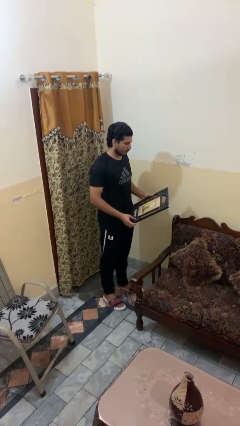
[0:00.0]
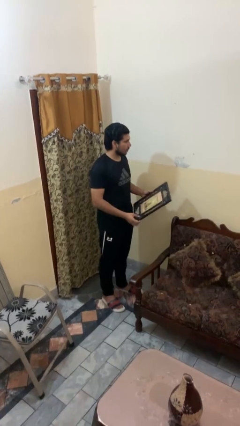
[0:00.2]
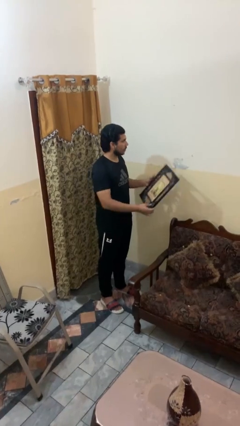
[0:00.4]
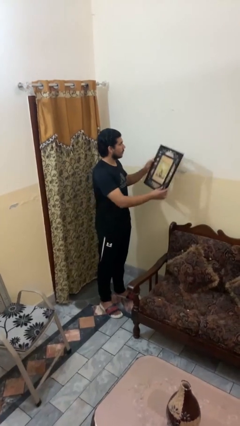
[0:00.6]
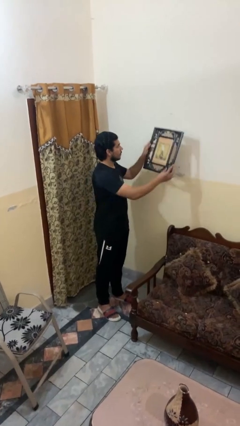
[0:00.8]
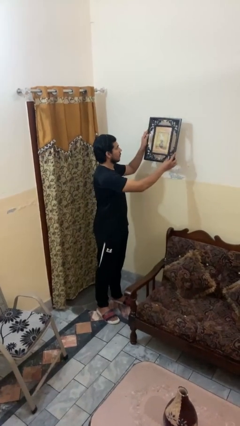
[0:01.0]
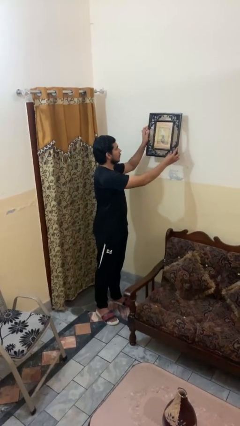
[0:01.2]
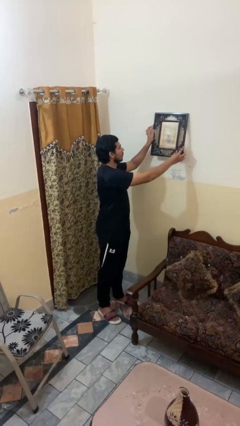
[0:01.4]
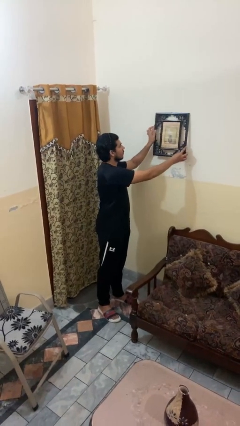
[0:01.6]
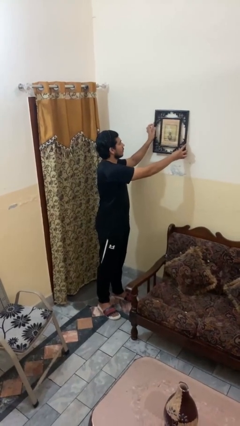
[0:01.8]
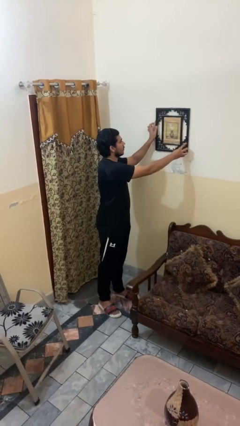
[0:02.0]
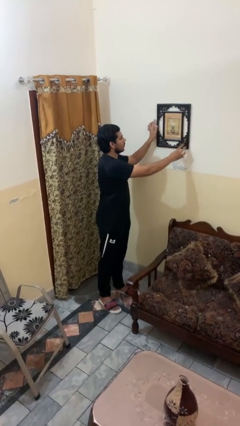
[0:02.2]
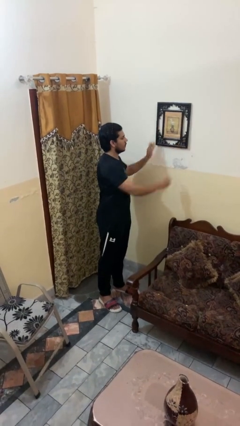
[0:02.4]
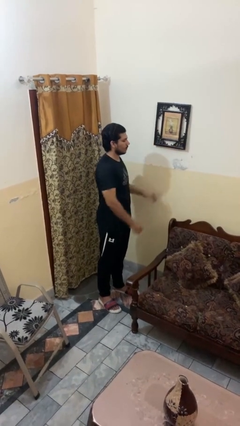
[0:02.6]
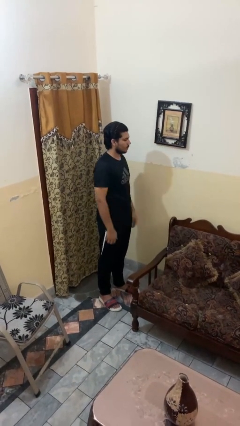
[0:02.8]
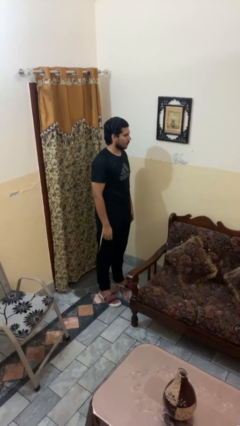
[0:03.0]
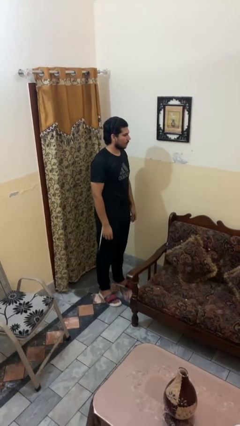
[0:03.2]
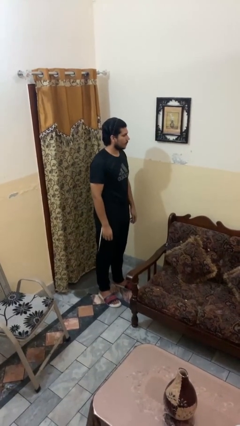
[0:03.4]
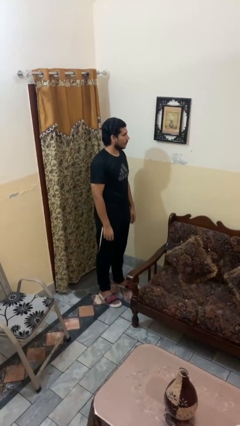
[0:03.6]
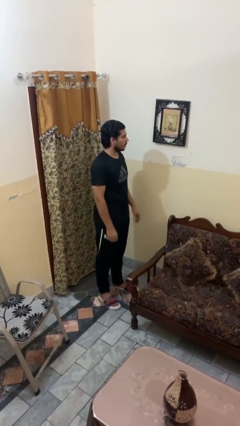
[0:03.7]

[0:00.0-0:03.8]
person puts up picture frame

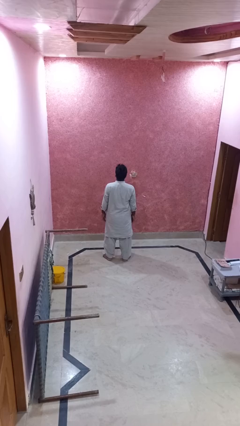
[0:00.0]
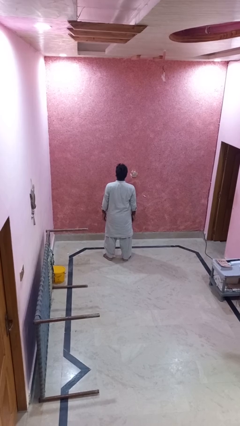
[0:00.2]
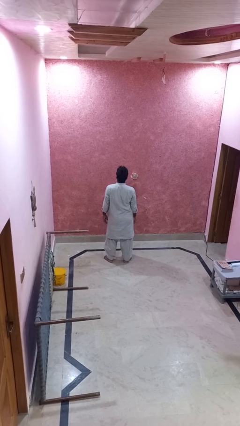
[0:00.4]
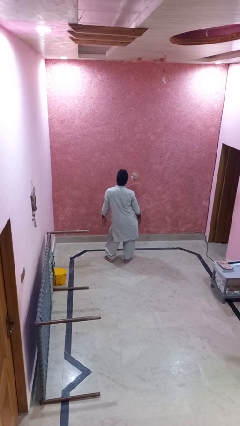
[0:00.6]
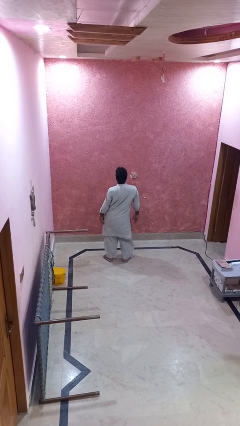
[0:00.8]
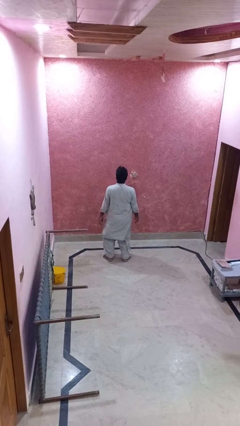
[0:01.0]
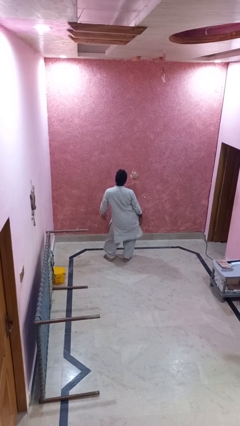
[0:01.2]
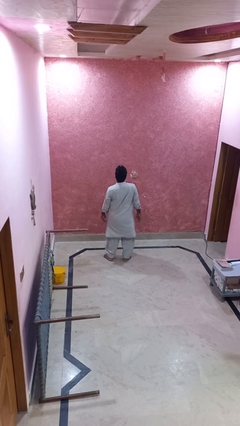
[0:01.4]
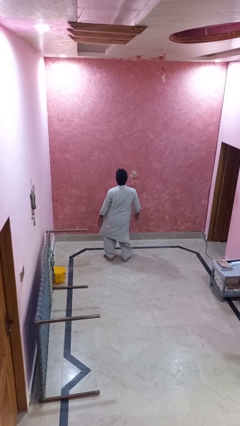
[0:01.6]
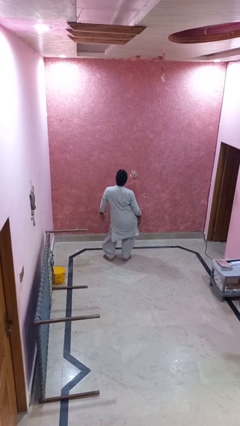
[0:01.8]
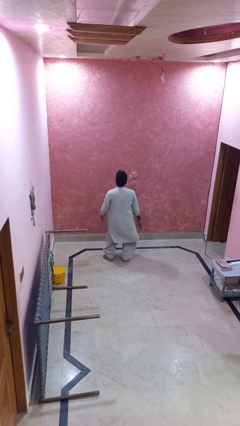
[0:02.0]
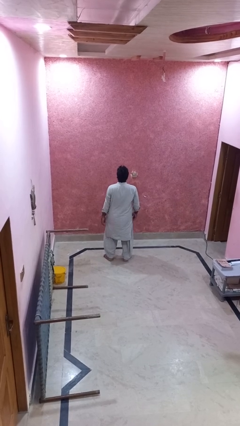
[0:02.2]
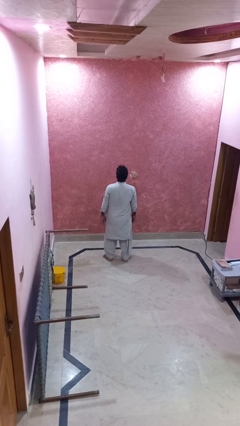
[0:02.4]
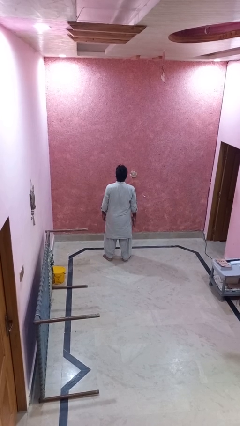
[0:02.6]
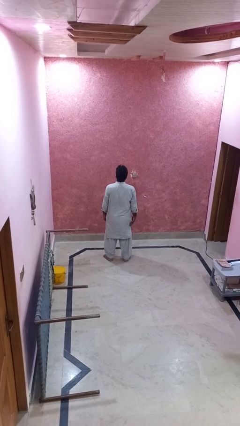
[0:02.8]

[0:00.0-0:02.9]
person wiggles hips

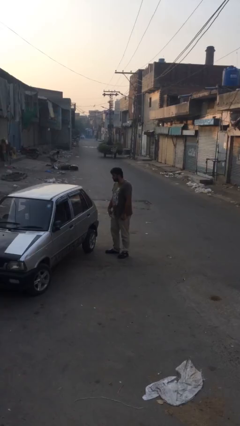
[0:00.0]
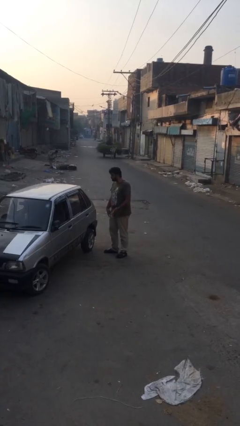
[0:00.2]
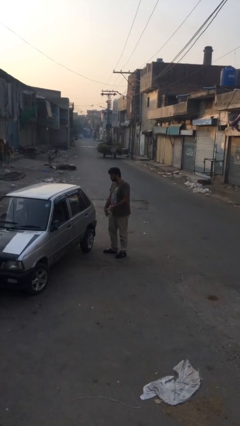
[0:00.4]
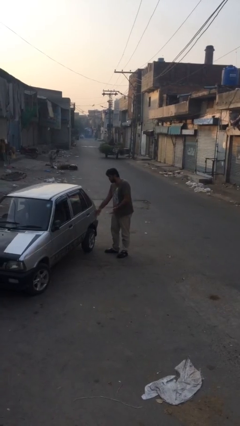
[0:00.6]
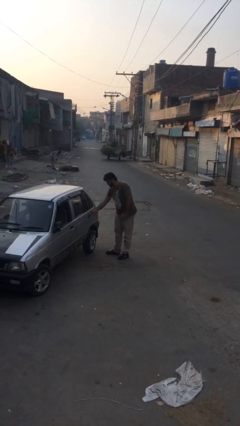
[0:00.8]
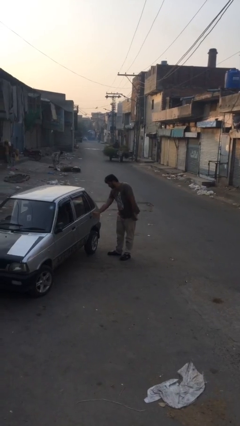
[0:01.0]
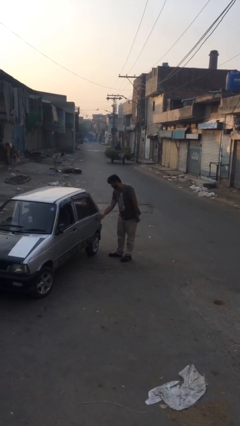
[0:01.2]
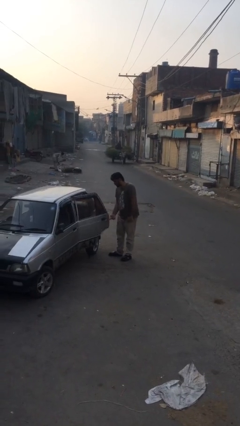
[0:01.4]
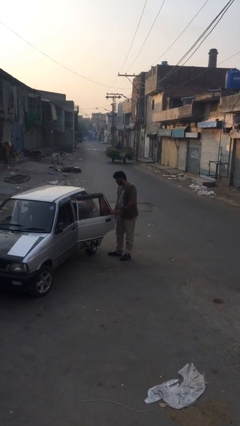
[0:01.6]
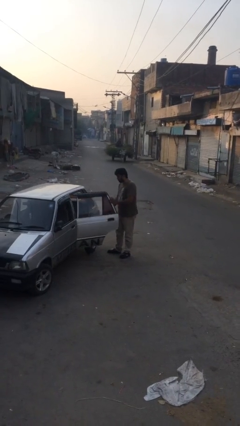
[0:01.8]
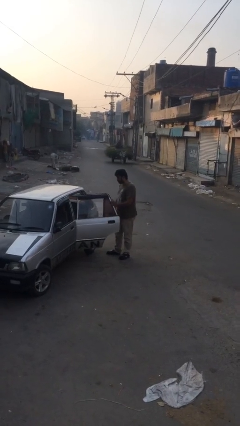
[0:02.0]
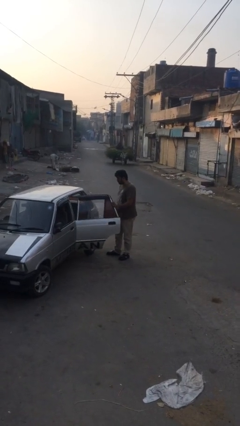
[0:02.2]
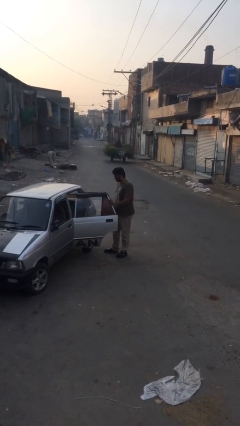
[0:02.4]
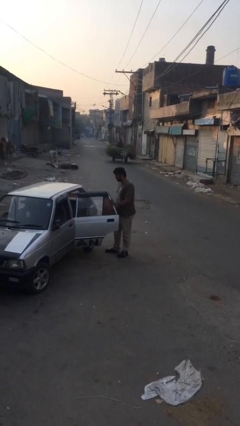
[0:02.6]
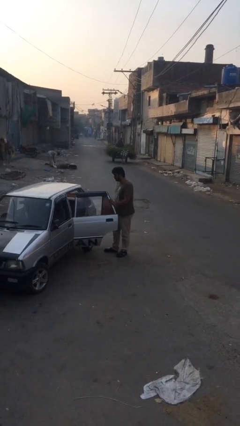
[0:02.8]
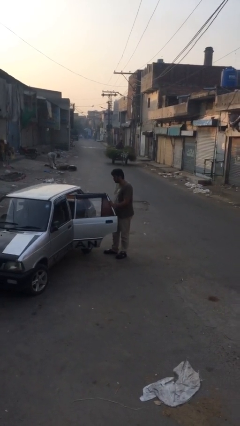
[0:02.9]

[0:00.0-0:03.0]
person opens car door

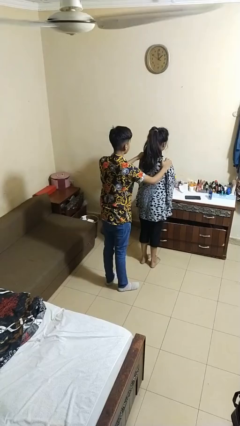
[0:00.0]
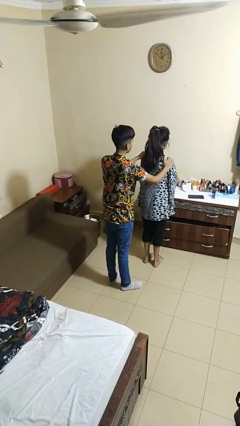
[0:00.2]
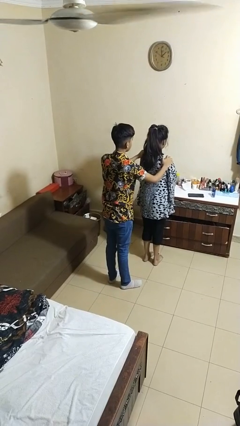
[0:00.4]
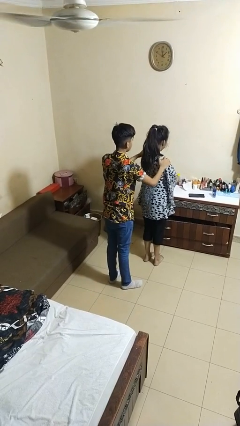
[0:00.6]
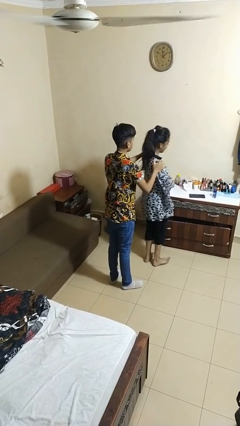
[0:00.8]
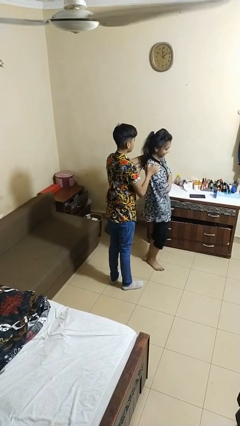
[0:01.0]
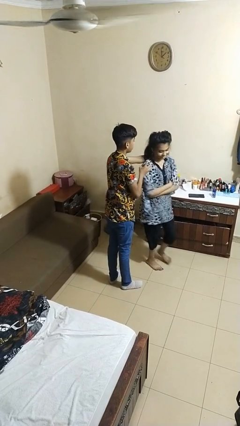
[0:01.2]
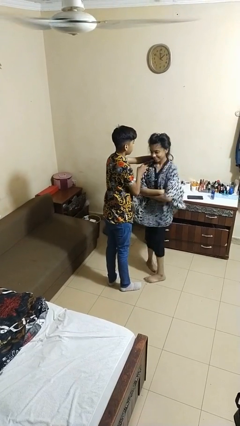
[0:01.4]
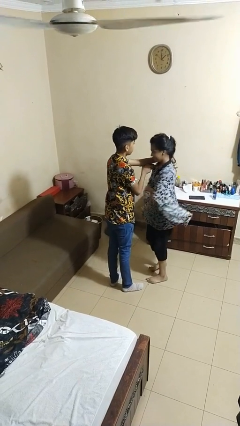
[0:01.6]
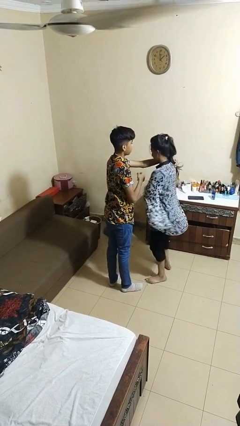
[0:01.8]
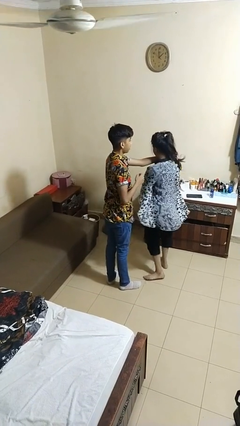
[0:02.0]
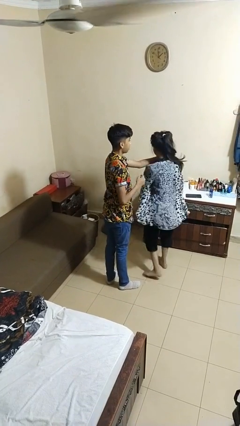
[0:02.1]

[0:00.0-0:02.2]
person spins person around

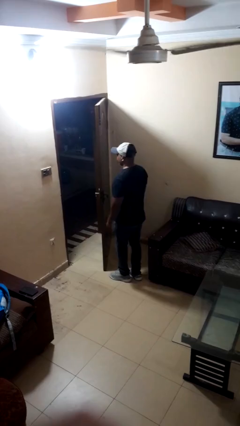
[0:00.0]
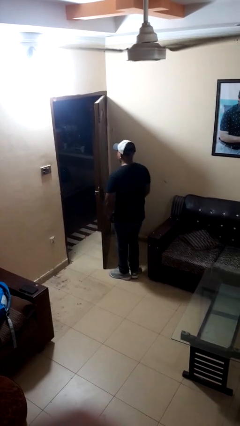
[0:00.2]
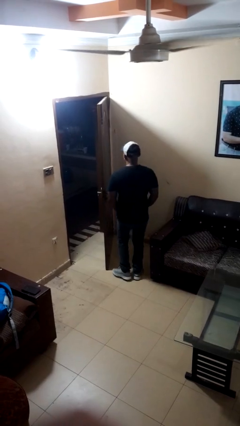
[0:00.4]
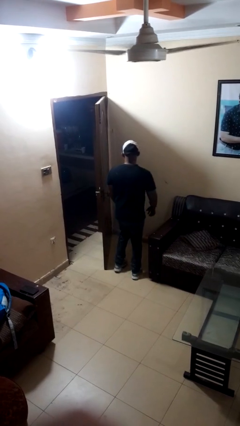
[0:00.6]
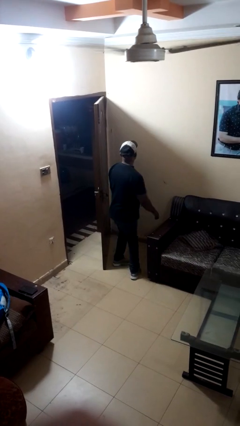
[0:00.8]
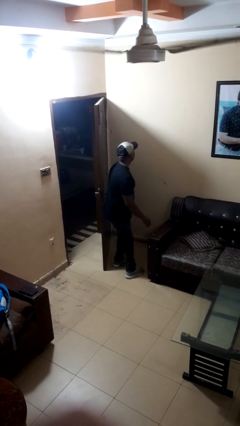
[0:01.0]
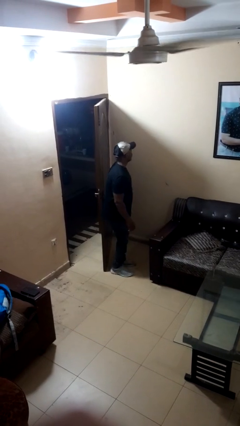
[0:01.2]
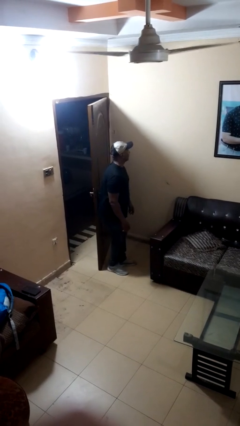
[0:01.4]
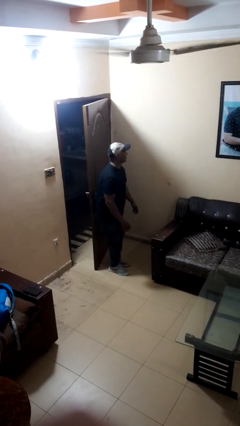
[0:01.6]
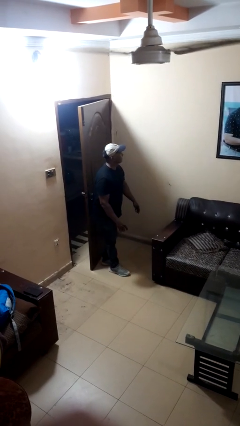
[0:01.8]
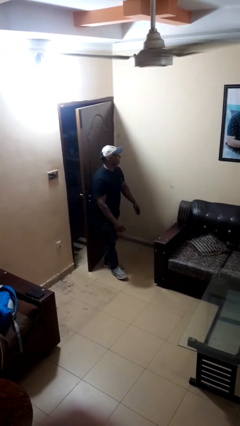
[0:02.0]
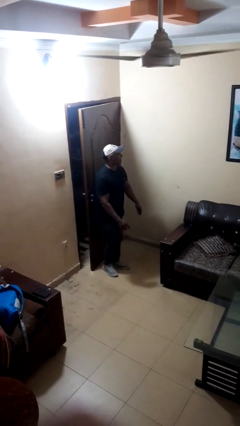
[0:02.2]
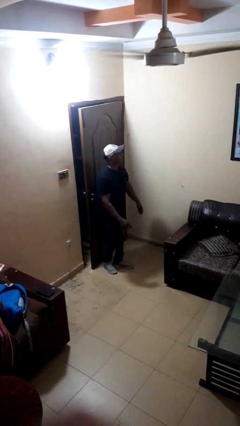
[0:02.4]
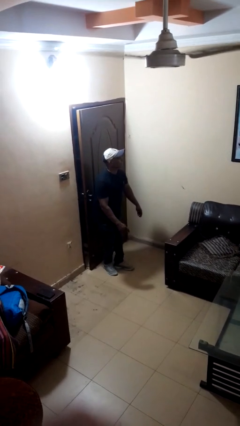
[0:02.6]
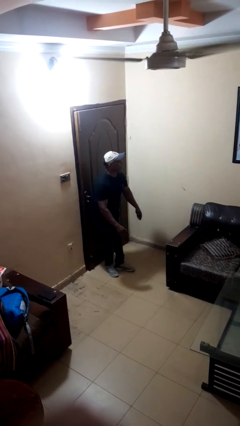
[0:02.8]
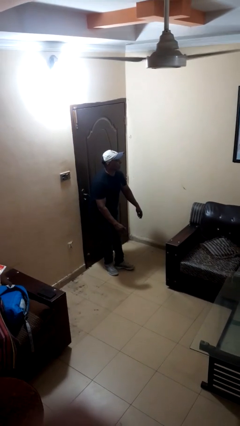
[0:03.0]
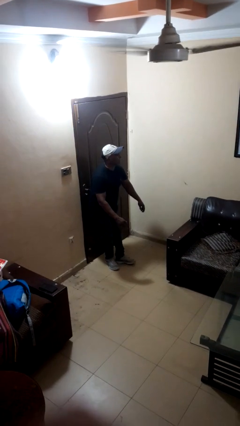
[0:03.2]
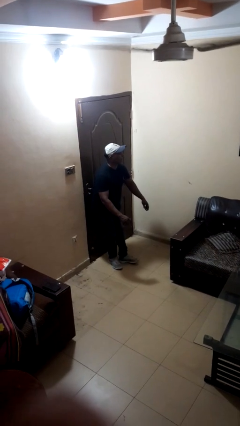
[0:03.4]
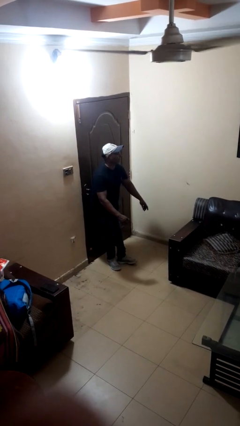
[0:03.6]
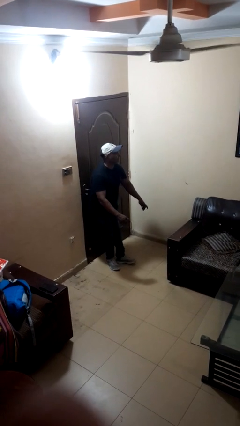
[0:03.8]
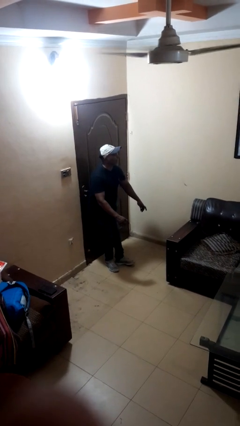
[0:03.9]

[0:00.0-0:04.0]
person closes door with hip

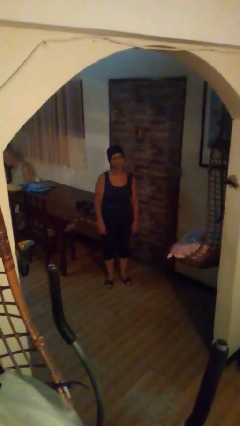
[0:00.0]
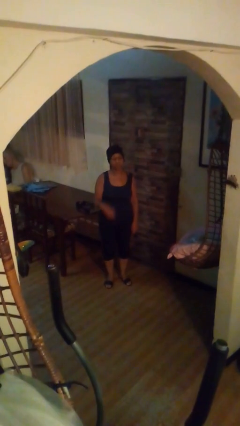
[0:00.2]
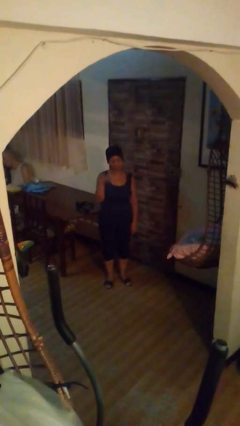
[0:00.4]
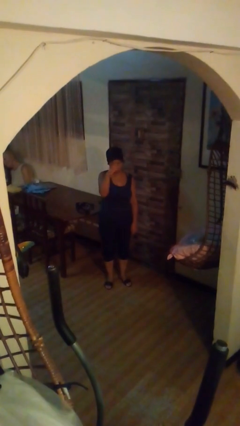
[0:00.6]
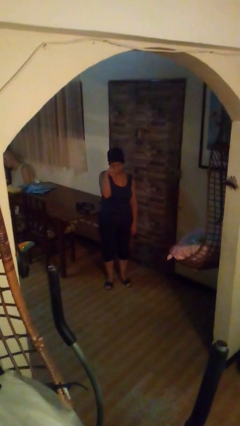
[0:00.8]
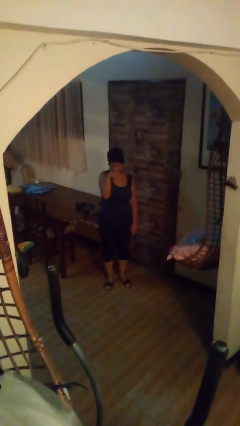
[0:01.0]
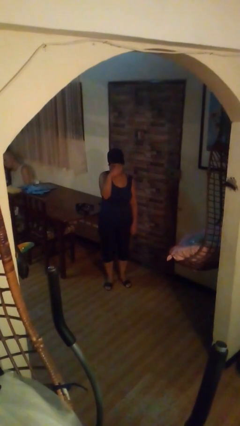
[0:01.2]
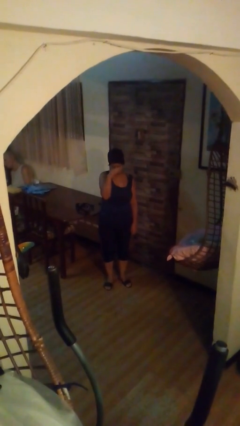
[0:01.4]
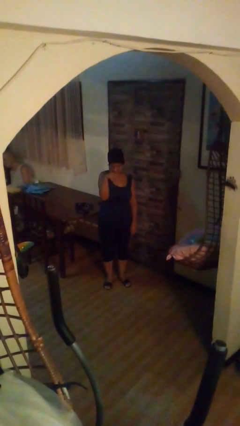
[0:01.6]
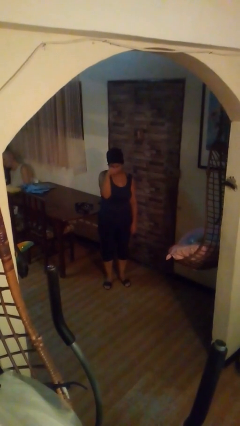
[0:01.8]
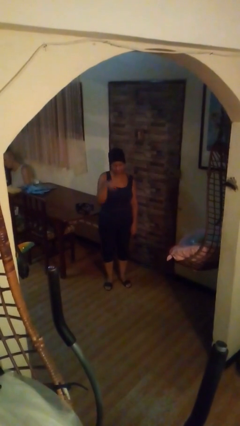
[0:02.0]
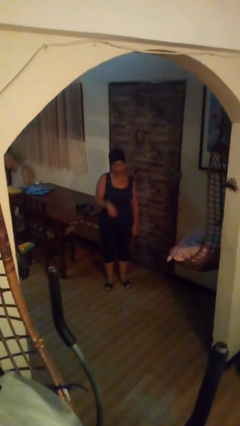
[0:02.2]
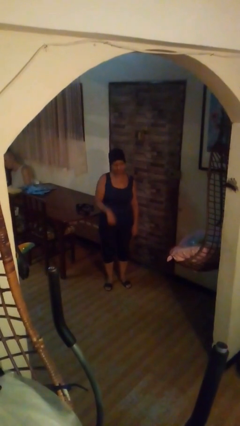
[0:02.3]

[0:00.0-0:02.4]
person gestures come here
